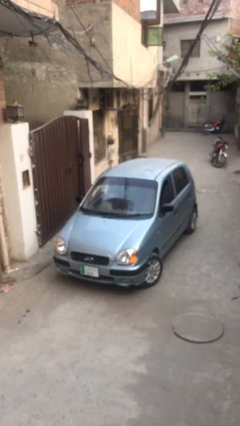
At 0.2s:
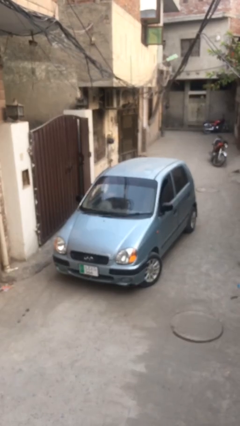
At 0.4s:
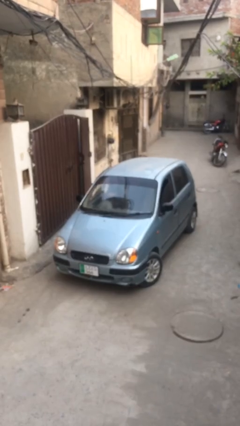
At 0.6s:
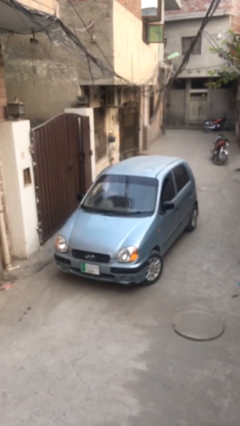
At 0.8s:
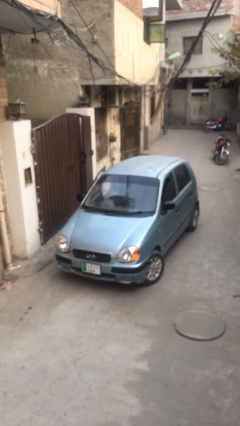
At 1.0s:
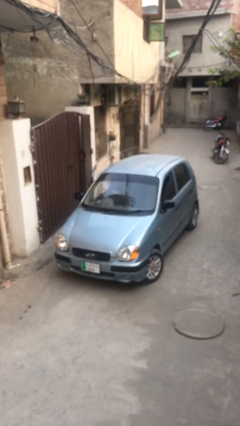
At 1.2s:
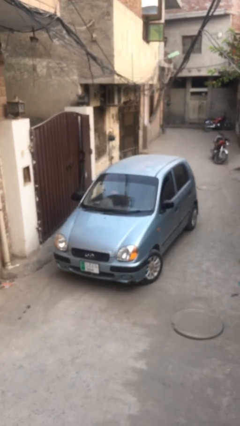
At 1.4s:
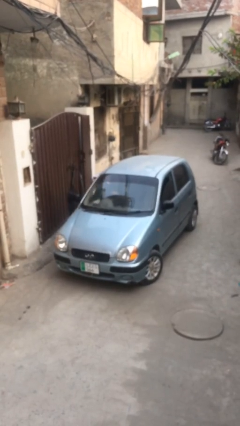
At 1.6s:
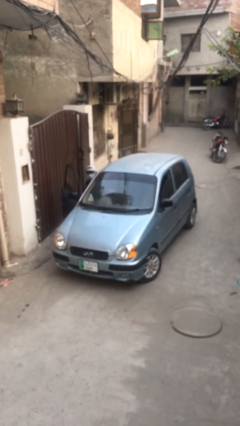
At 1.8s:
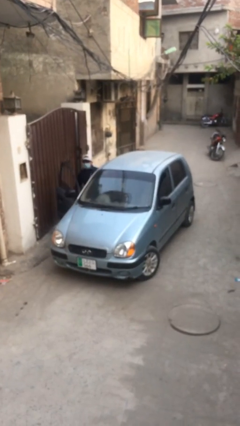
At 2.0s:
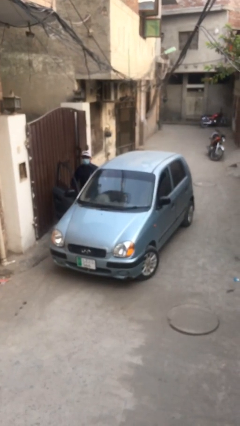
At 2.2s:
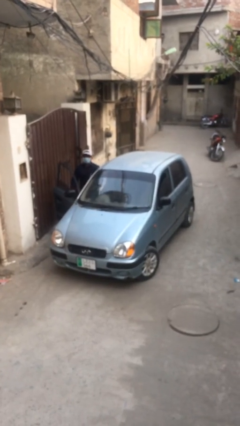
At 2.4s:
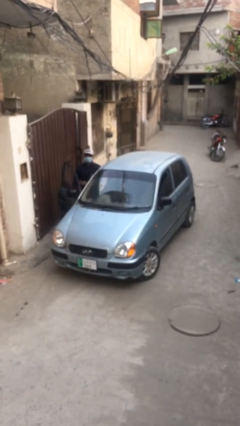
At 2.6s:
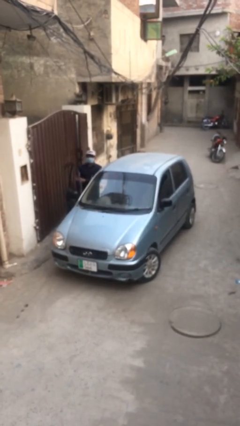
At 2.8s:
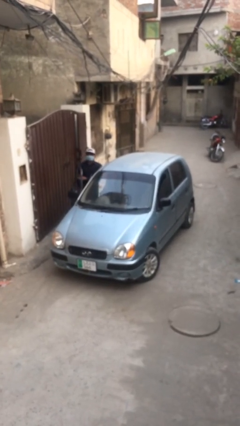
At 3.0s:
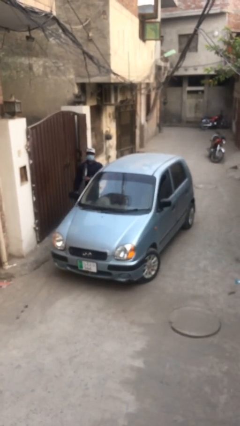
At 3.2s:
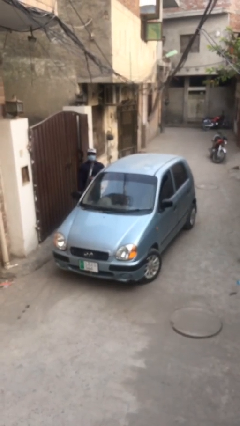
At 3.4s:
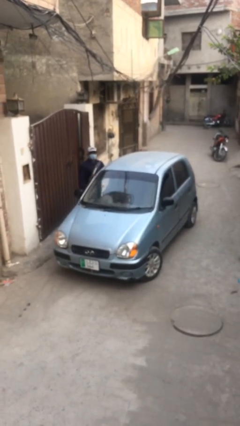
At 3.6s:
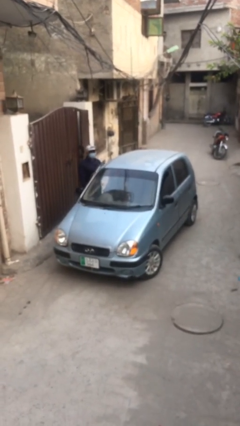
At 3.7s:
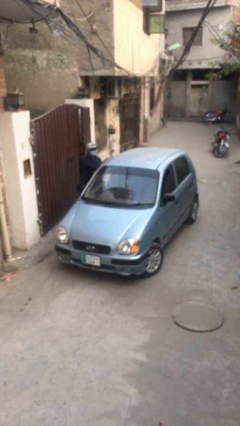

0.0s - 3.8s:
car drops off person

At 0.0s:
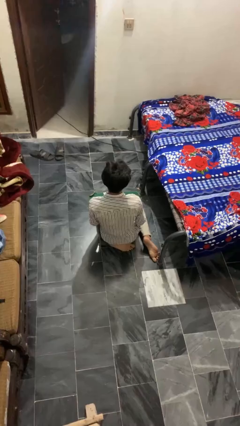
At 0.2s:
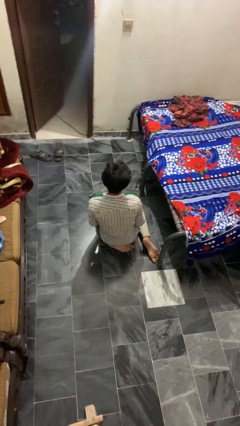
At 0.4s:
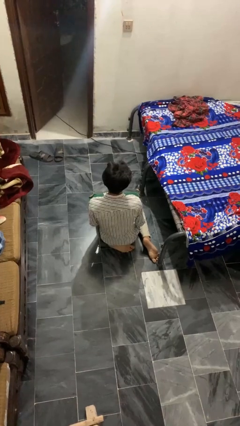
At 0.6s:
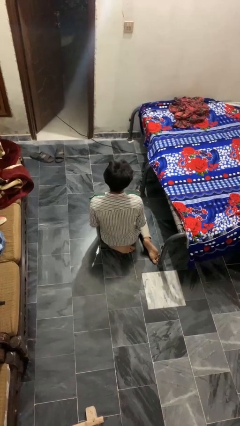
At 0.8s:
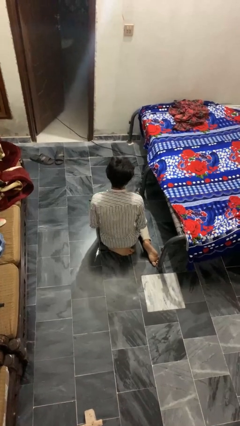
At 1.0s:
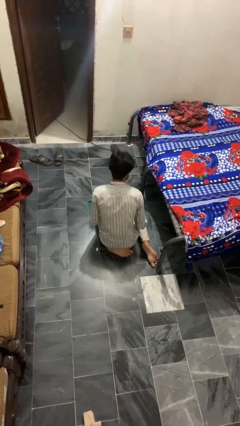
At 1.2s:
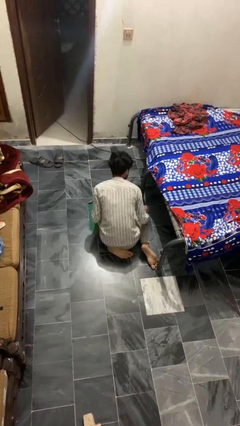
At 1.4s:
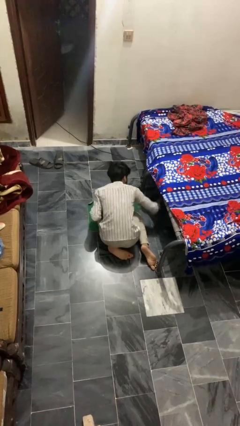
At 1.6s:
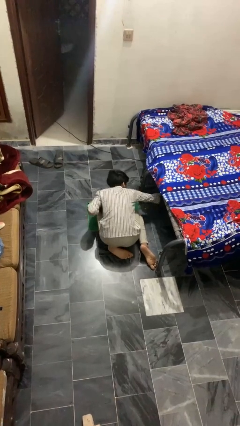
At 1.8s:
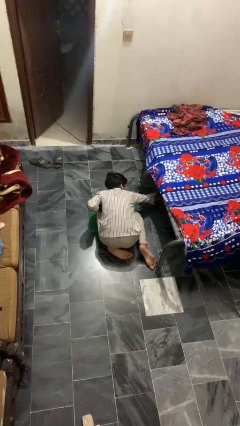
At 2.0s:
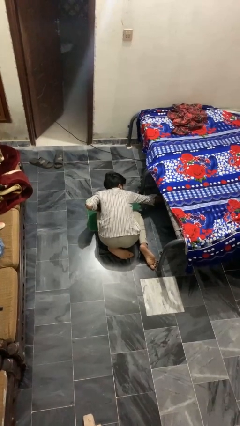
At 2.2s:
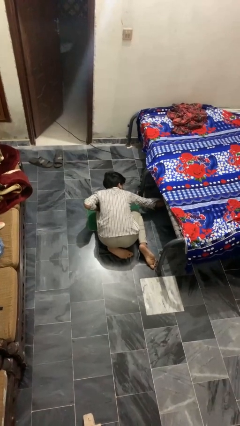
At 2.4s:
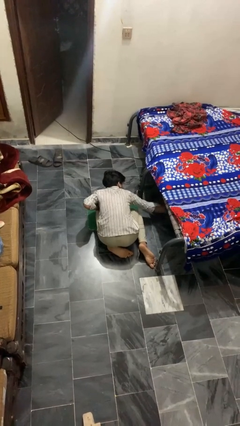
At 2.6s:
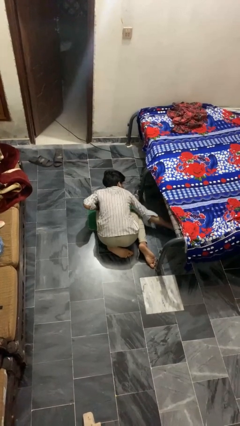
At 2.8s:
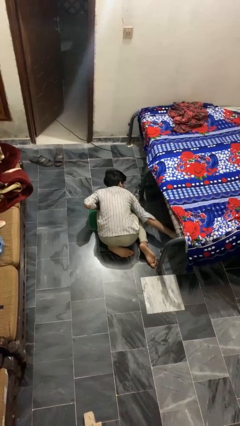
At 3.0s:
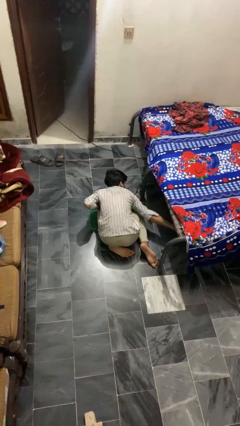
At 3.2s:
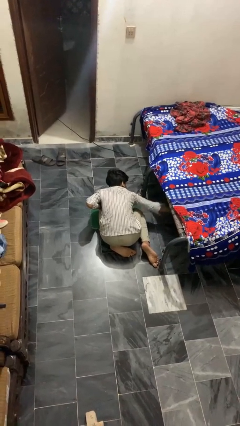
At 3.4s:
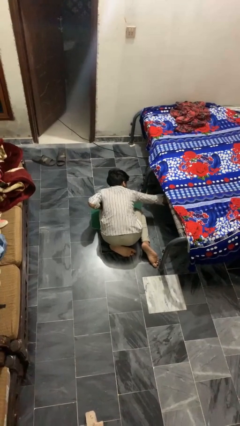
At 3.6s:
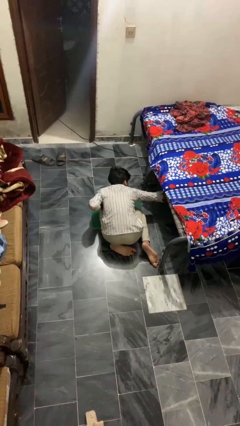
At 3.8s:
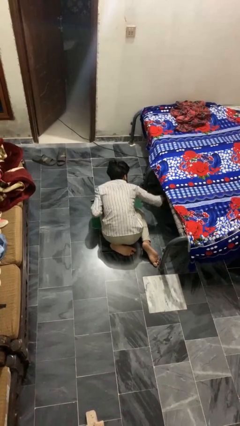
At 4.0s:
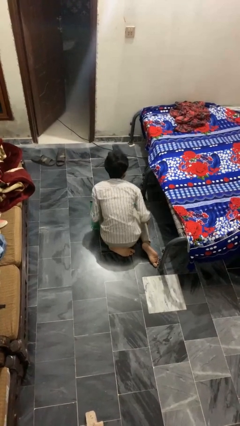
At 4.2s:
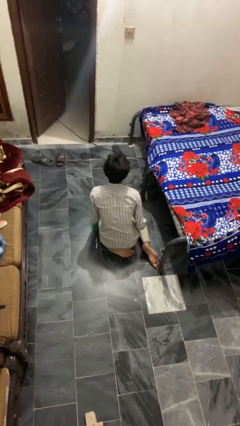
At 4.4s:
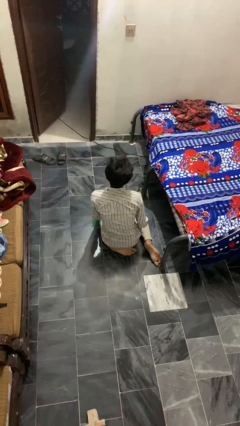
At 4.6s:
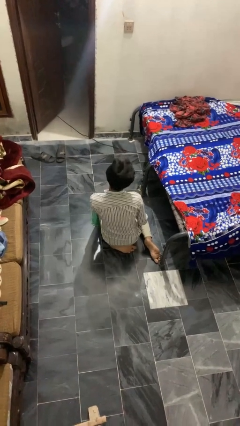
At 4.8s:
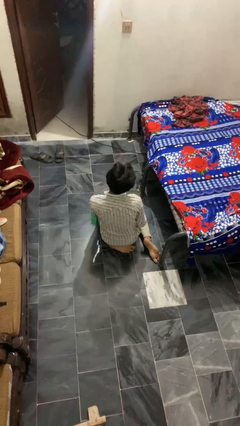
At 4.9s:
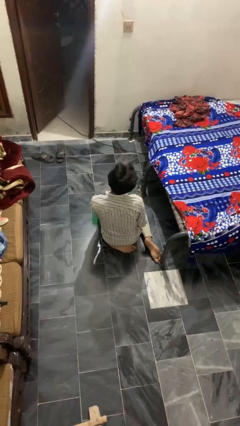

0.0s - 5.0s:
person searches under bed

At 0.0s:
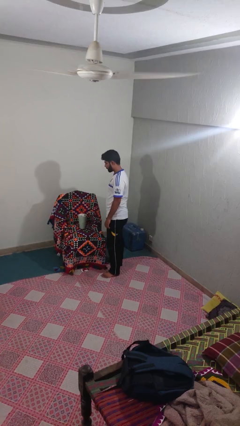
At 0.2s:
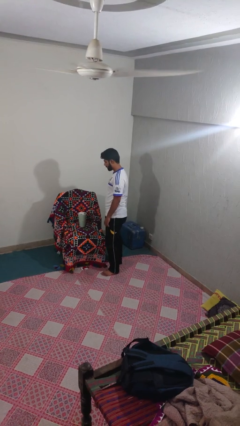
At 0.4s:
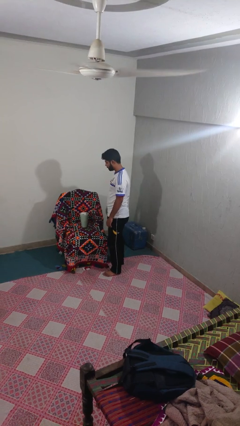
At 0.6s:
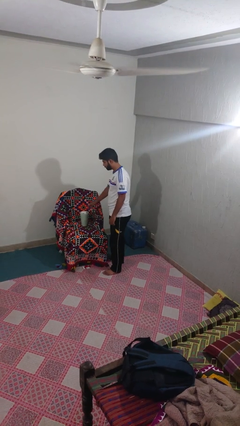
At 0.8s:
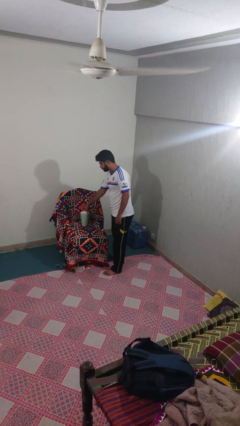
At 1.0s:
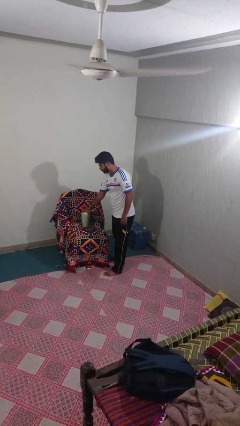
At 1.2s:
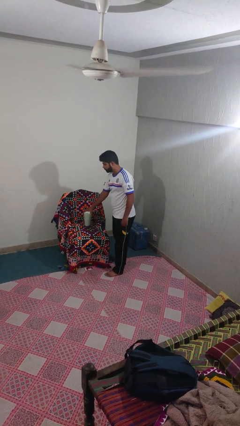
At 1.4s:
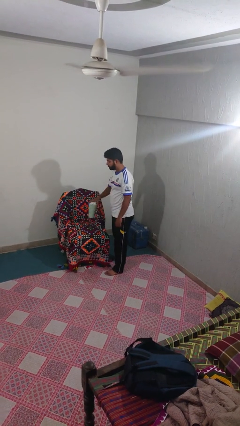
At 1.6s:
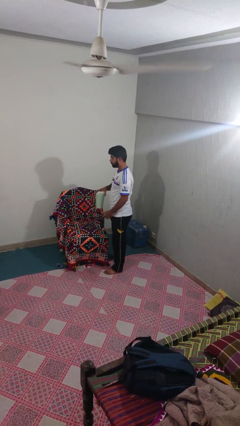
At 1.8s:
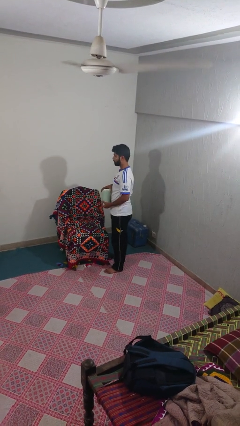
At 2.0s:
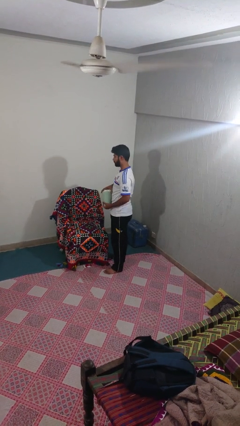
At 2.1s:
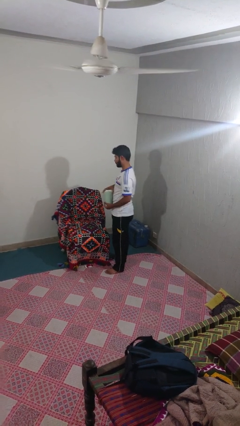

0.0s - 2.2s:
person picks up object from couch

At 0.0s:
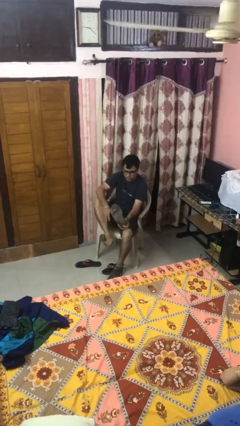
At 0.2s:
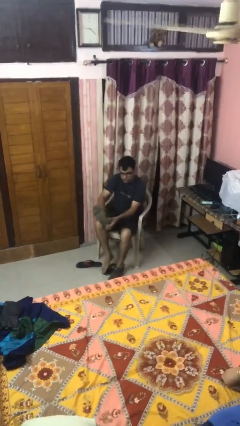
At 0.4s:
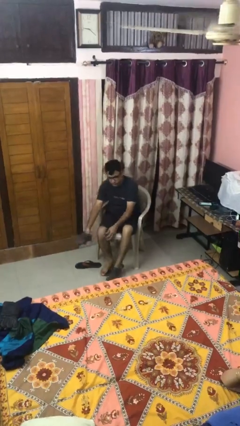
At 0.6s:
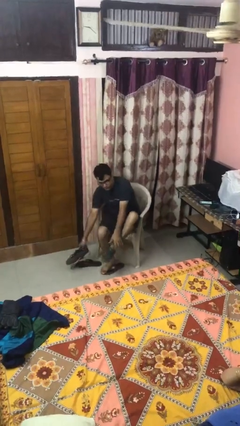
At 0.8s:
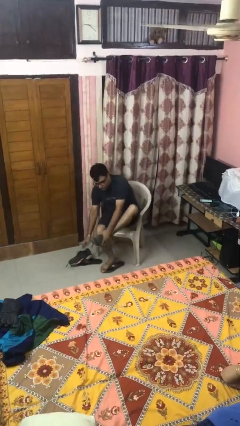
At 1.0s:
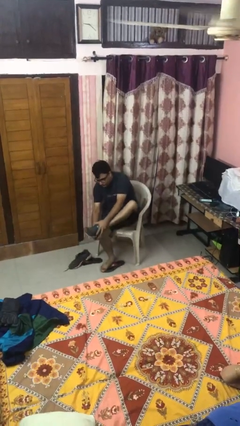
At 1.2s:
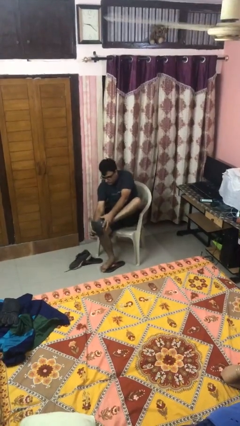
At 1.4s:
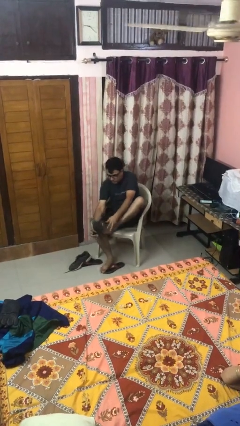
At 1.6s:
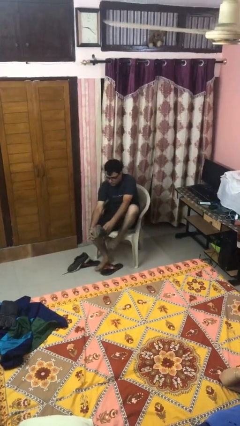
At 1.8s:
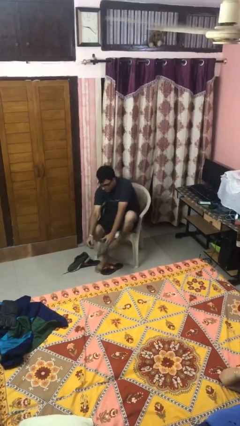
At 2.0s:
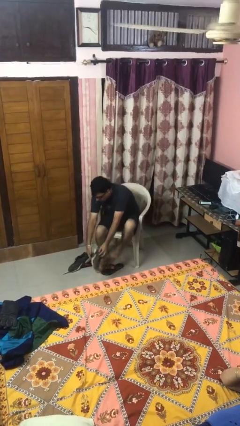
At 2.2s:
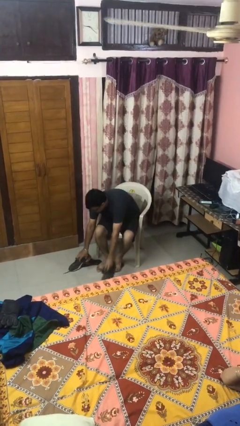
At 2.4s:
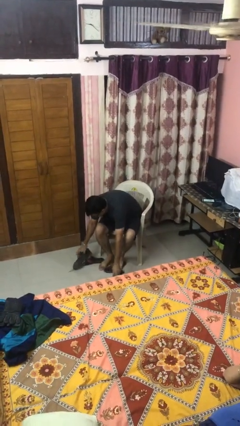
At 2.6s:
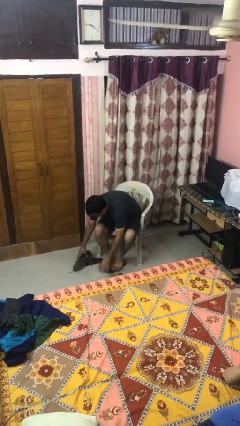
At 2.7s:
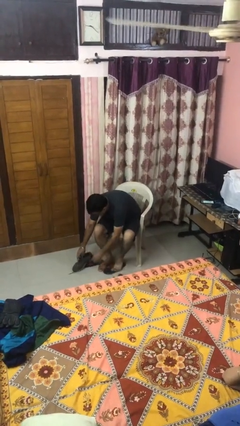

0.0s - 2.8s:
person takes off shoes

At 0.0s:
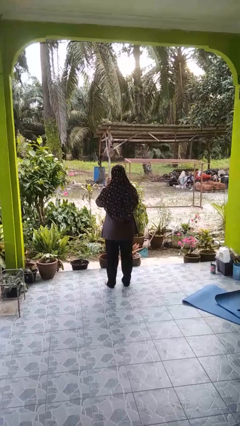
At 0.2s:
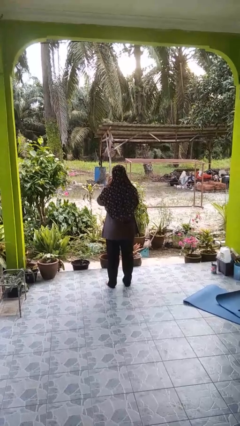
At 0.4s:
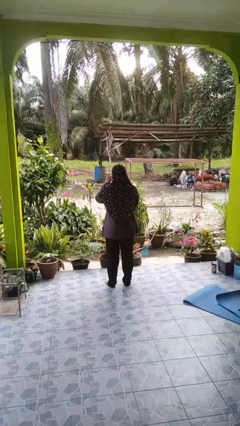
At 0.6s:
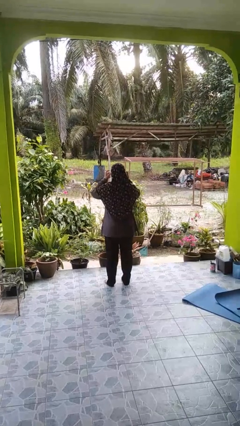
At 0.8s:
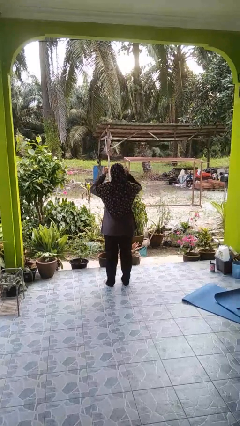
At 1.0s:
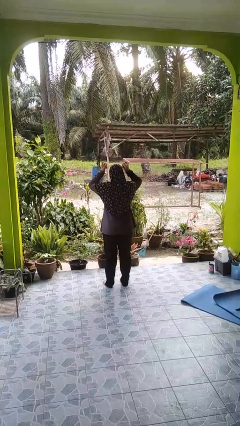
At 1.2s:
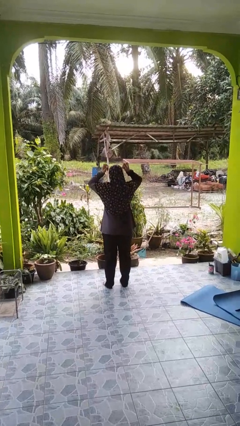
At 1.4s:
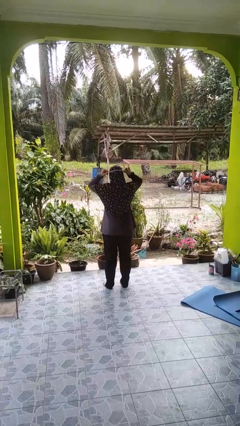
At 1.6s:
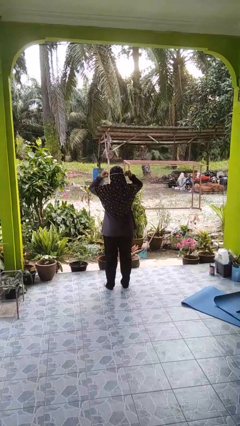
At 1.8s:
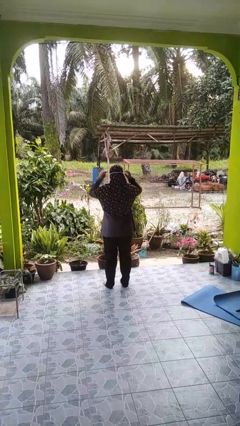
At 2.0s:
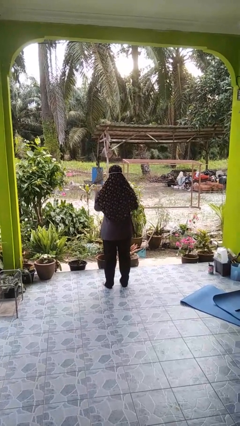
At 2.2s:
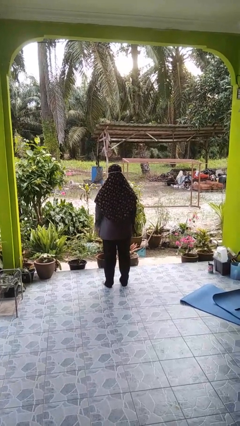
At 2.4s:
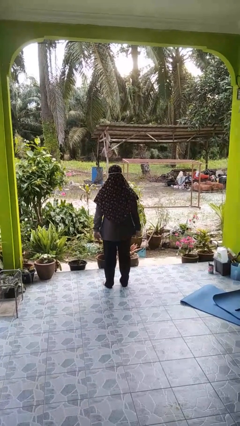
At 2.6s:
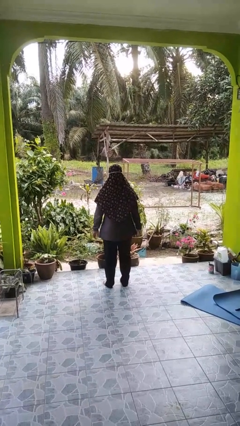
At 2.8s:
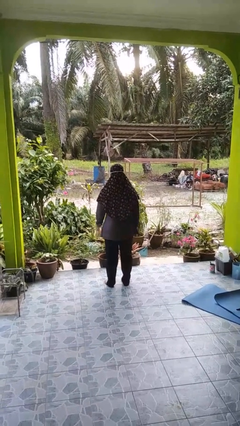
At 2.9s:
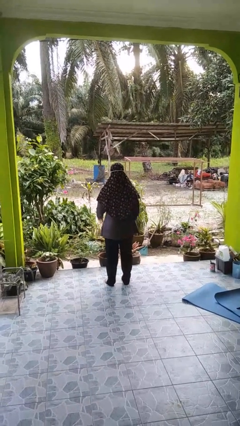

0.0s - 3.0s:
person puts on facemask

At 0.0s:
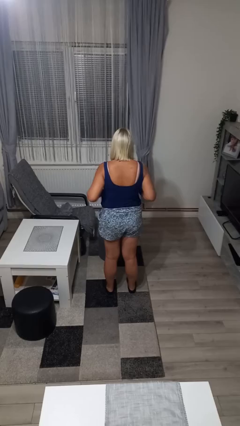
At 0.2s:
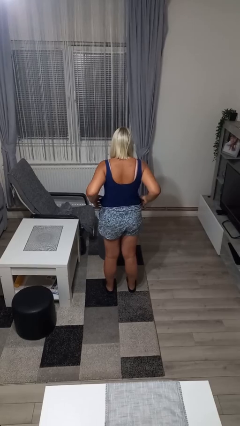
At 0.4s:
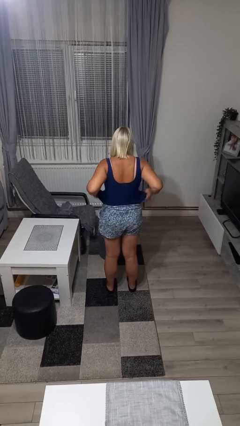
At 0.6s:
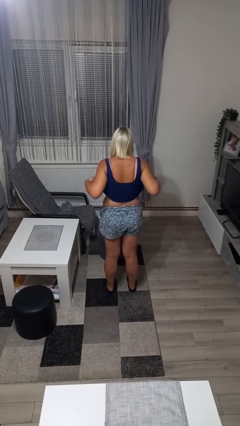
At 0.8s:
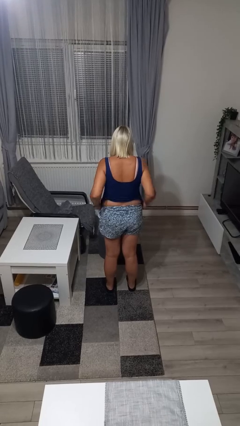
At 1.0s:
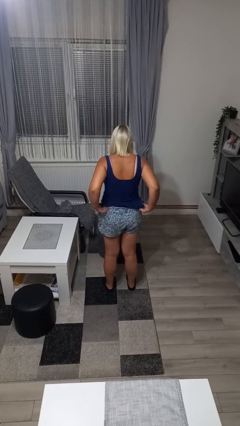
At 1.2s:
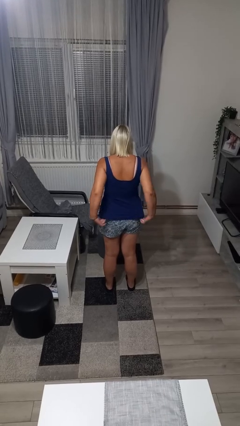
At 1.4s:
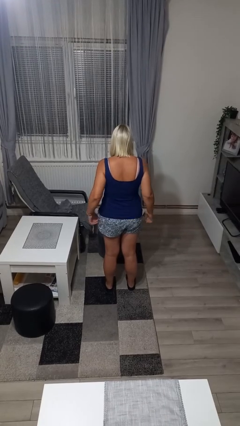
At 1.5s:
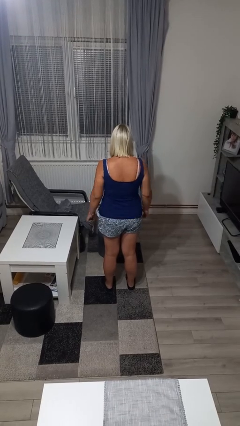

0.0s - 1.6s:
person untucks shirt
